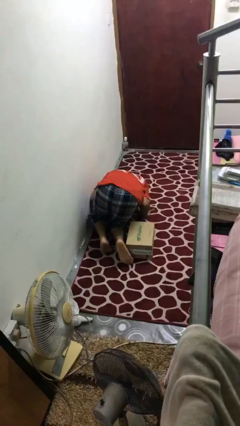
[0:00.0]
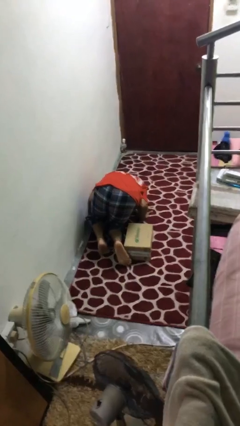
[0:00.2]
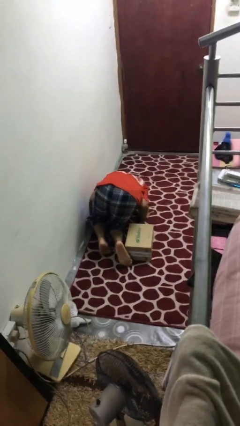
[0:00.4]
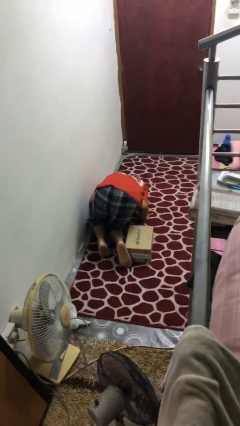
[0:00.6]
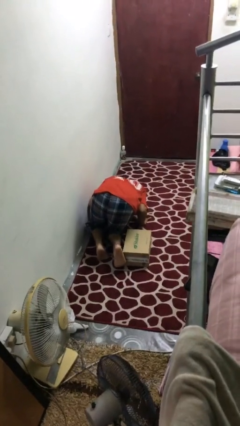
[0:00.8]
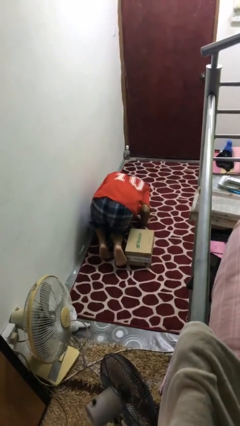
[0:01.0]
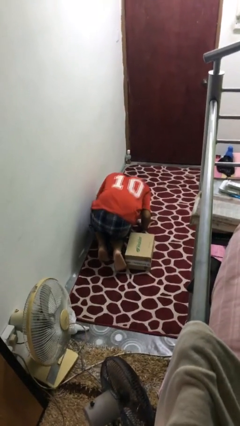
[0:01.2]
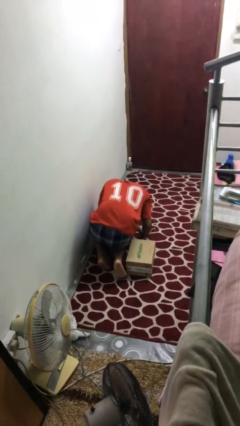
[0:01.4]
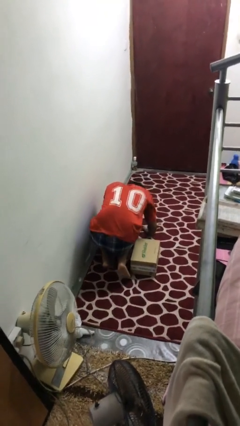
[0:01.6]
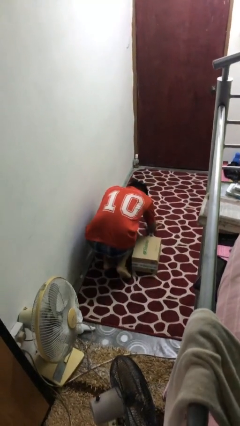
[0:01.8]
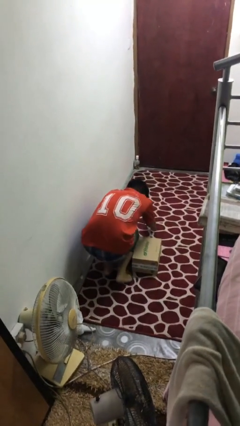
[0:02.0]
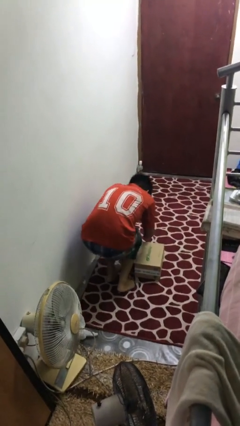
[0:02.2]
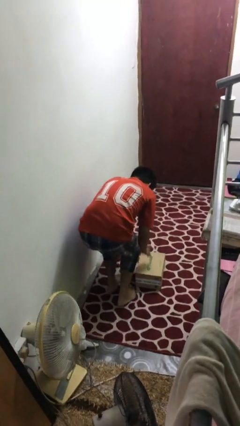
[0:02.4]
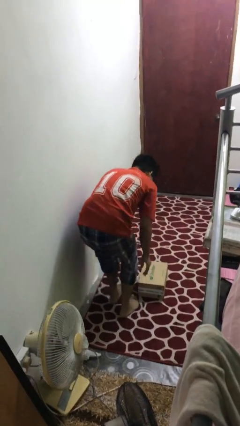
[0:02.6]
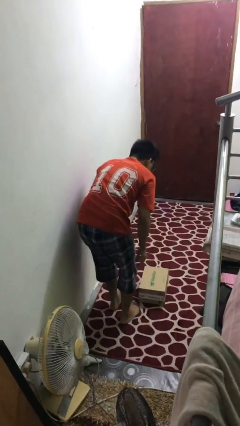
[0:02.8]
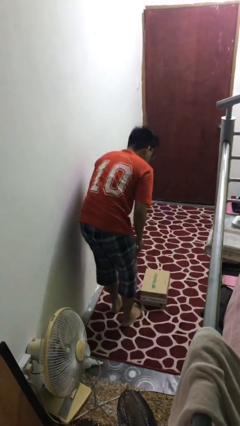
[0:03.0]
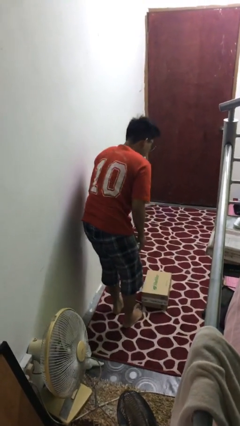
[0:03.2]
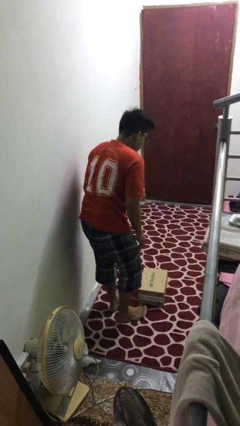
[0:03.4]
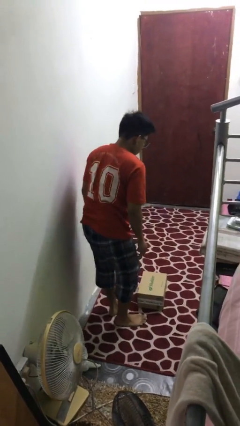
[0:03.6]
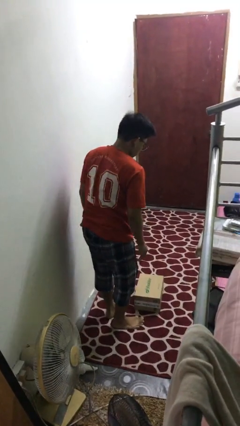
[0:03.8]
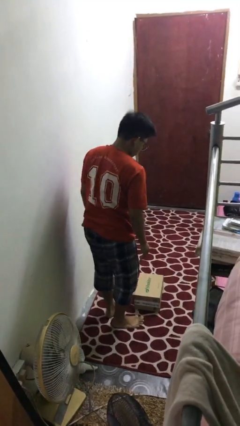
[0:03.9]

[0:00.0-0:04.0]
person stands up from floor

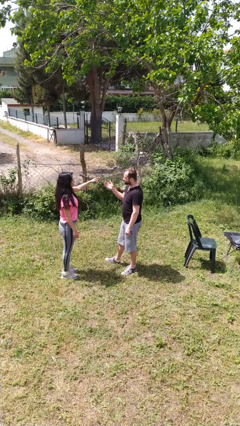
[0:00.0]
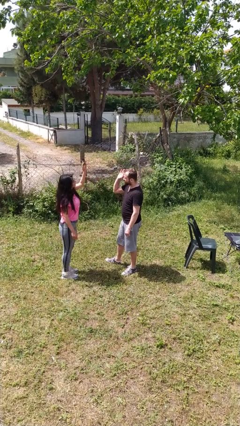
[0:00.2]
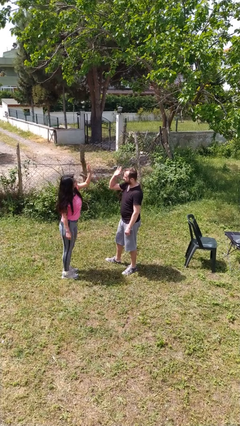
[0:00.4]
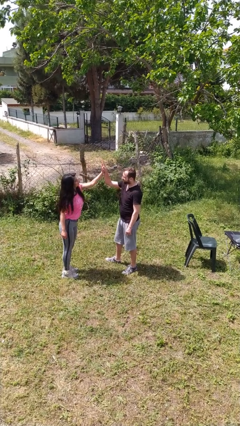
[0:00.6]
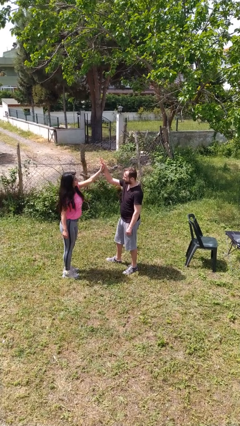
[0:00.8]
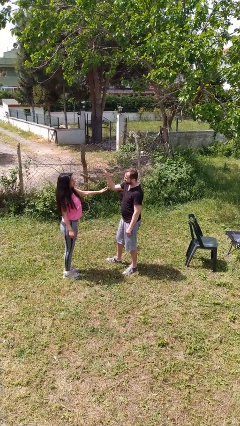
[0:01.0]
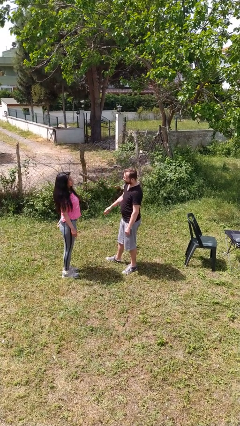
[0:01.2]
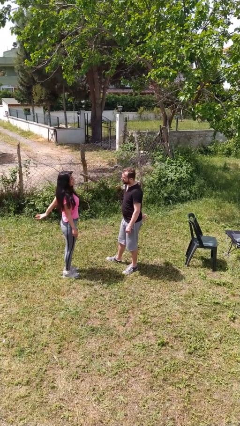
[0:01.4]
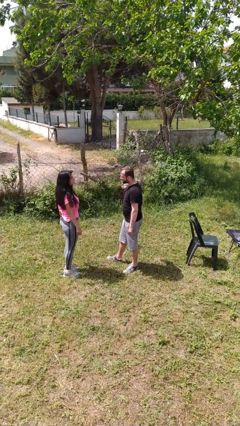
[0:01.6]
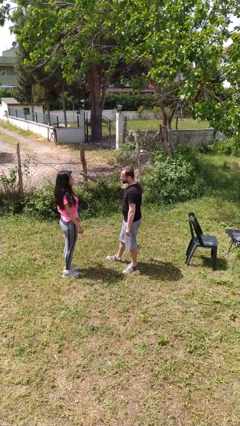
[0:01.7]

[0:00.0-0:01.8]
person highfives hand

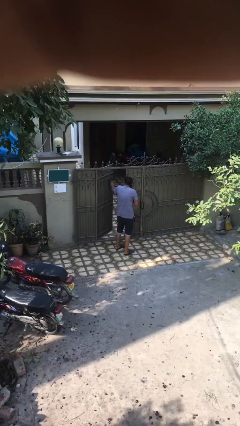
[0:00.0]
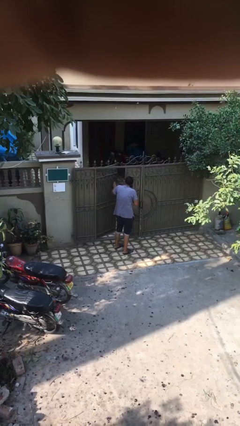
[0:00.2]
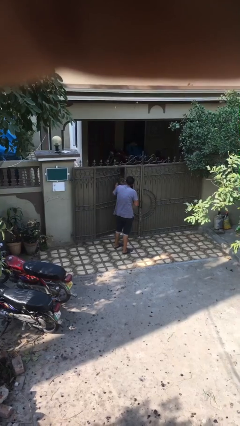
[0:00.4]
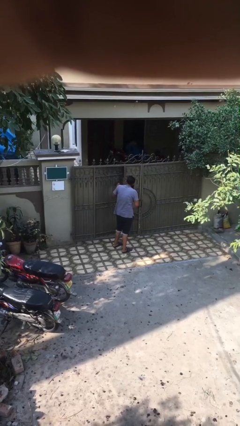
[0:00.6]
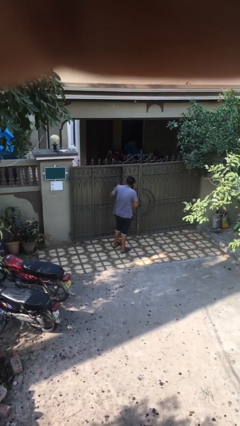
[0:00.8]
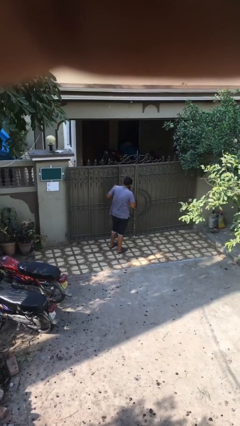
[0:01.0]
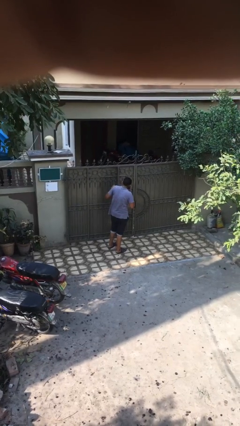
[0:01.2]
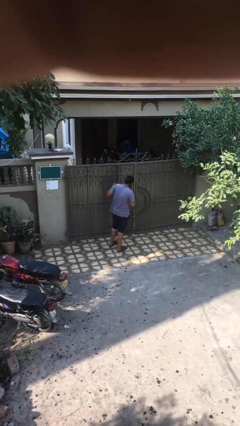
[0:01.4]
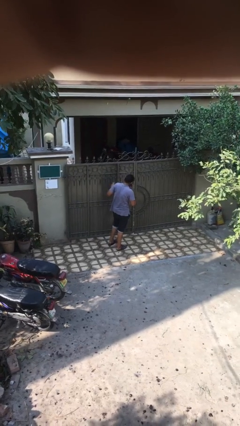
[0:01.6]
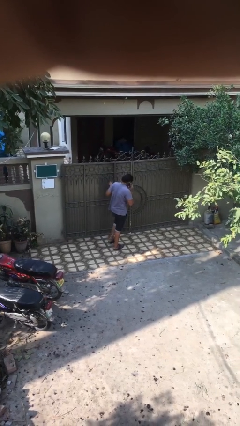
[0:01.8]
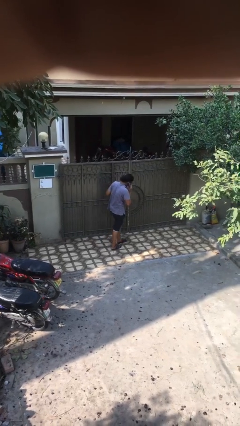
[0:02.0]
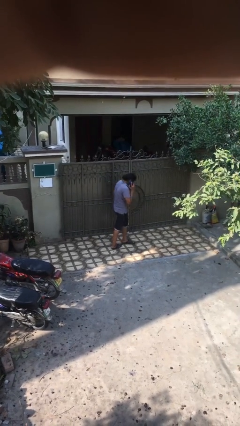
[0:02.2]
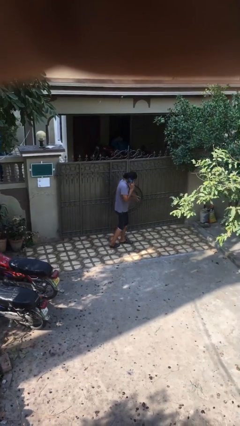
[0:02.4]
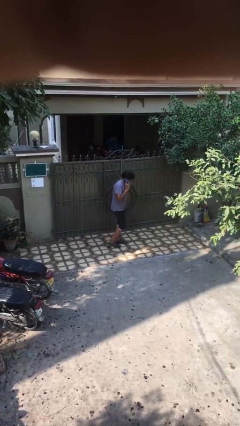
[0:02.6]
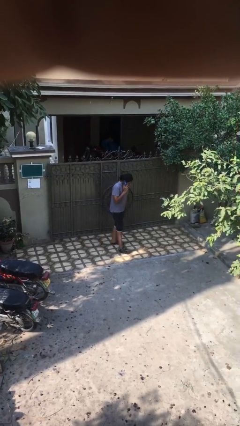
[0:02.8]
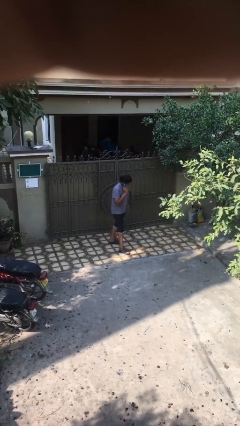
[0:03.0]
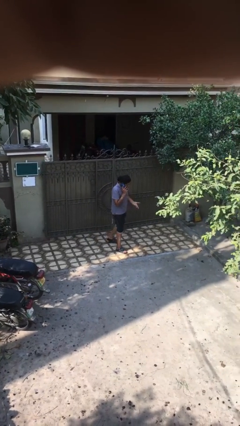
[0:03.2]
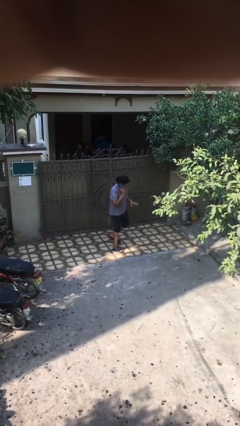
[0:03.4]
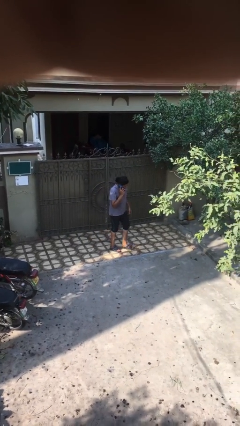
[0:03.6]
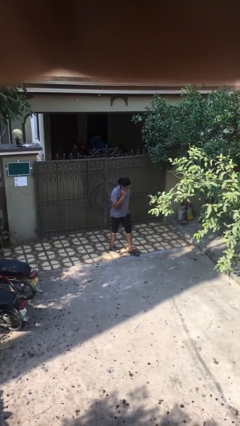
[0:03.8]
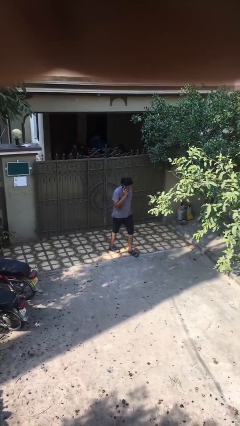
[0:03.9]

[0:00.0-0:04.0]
person closes facility door

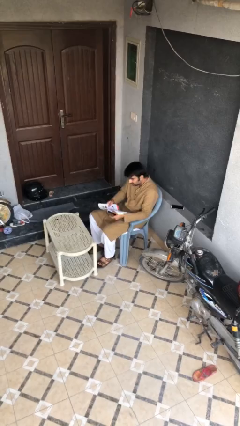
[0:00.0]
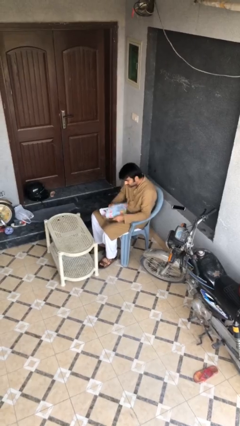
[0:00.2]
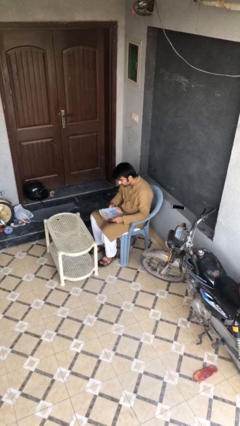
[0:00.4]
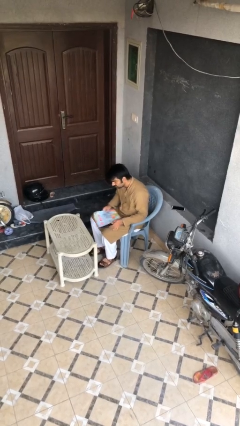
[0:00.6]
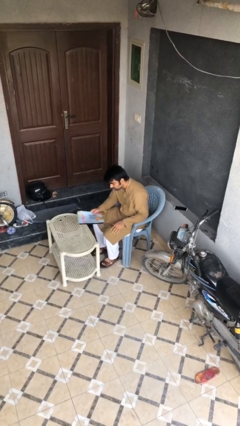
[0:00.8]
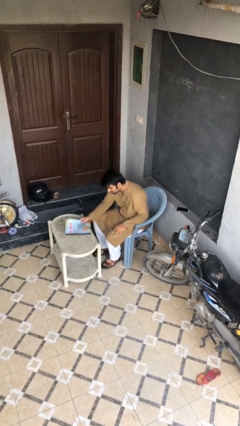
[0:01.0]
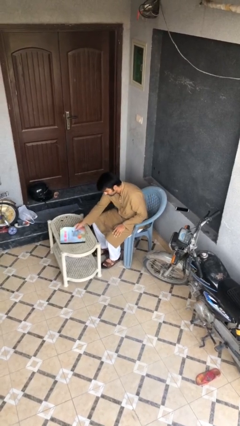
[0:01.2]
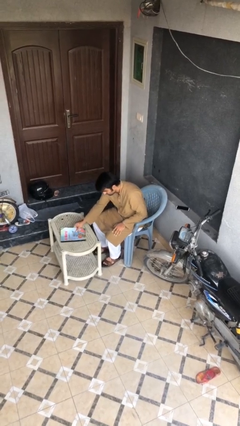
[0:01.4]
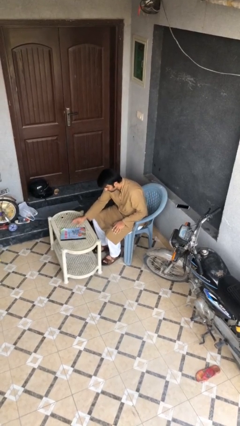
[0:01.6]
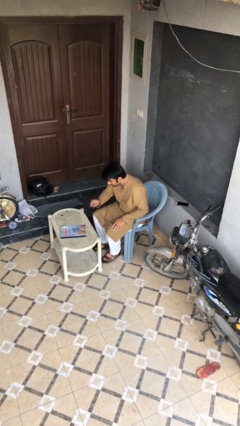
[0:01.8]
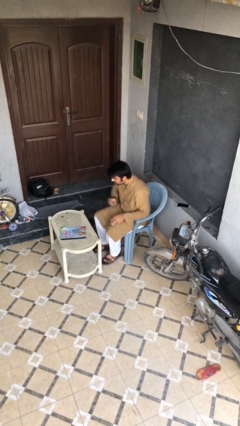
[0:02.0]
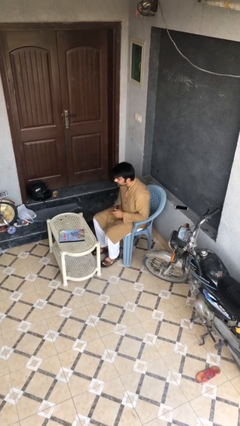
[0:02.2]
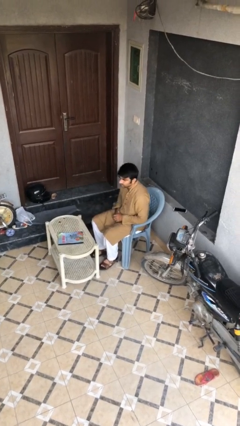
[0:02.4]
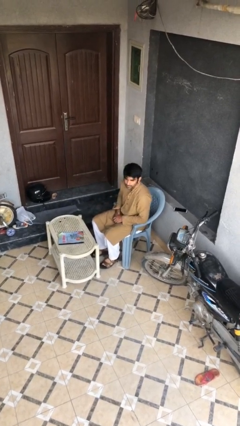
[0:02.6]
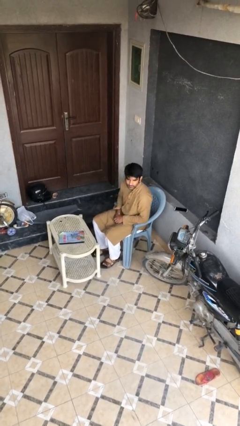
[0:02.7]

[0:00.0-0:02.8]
person puts down object on table

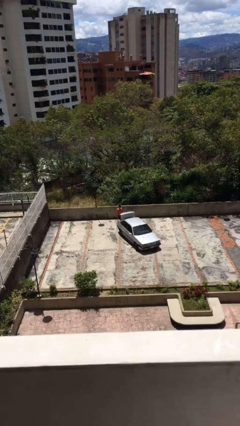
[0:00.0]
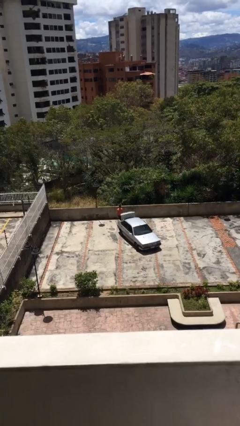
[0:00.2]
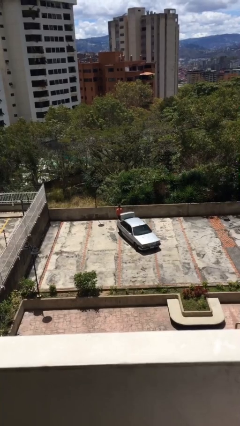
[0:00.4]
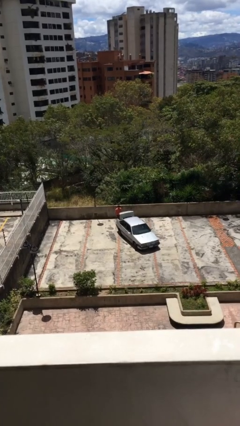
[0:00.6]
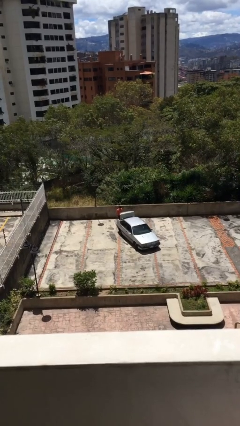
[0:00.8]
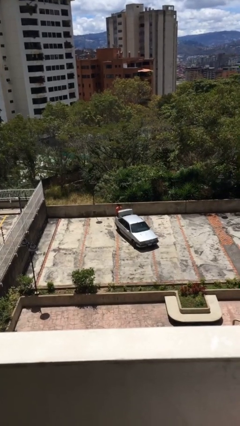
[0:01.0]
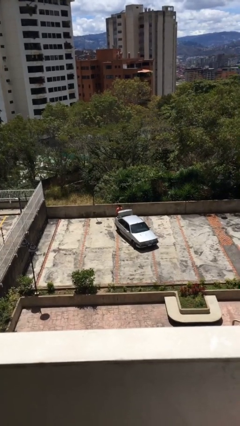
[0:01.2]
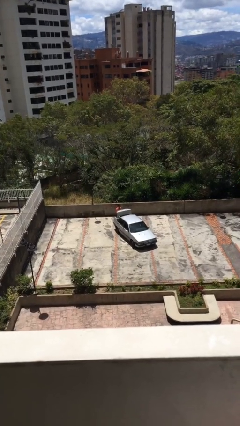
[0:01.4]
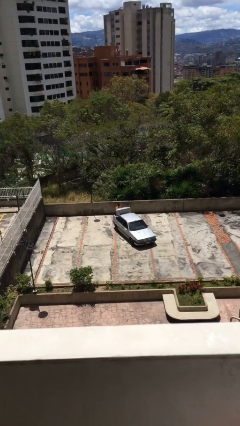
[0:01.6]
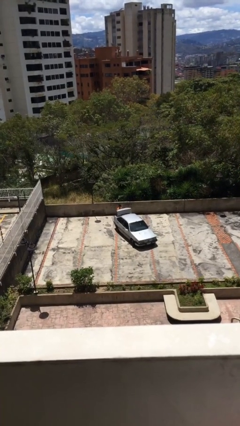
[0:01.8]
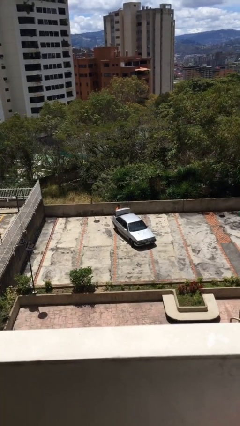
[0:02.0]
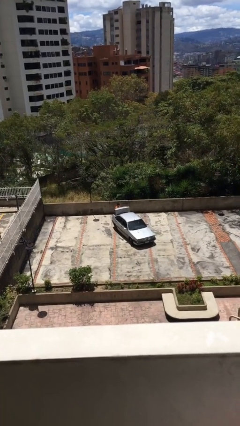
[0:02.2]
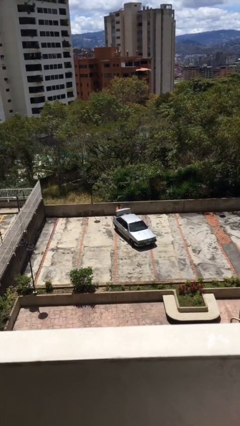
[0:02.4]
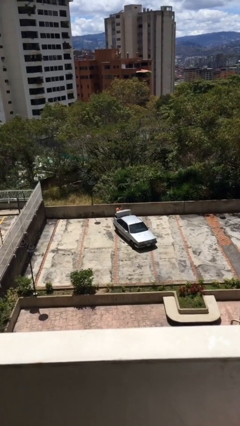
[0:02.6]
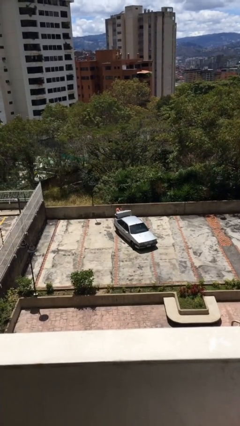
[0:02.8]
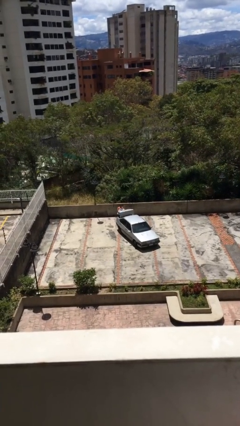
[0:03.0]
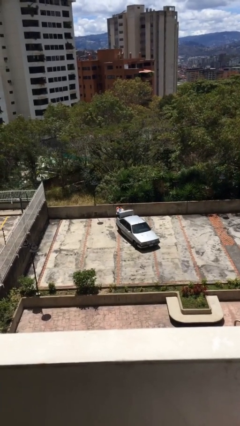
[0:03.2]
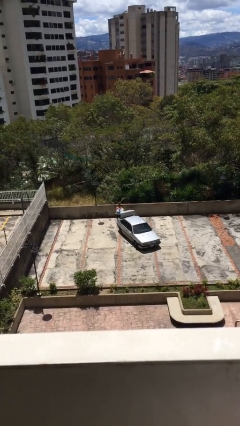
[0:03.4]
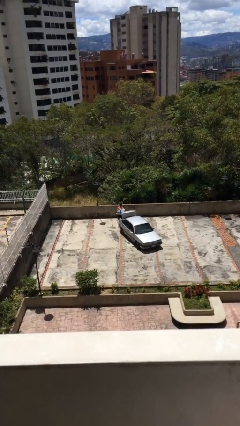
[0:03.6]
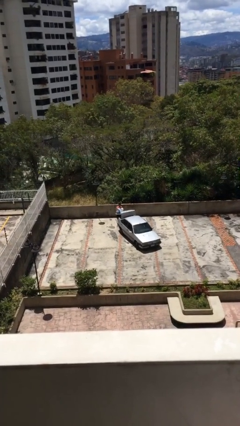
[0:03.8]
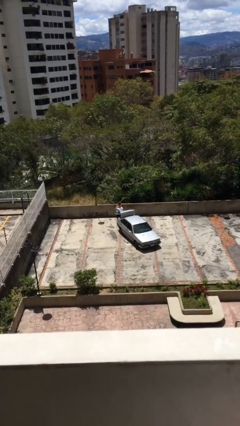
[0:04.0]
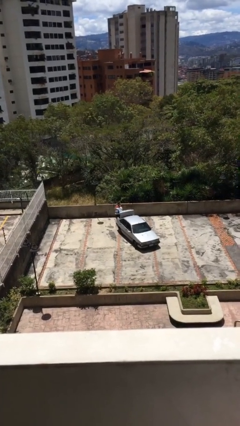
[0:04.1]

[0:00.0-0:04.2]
person unloads car

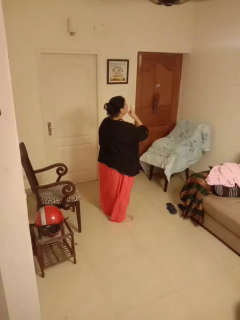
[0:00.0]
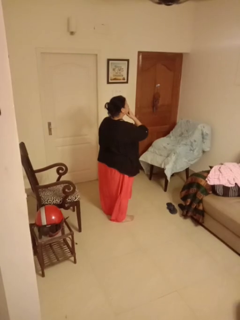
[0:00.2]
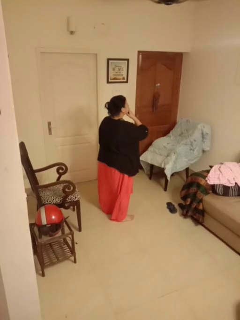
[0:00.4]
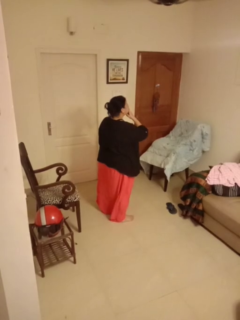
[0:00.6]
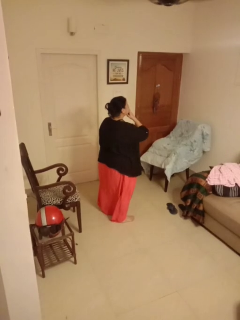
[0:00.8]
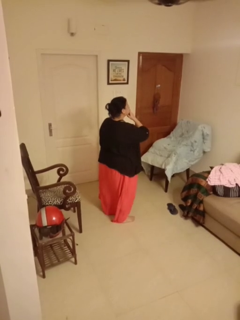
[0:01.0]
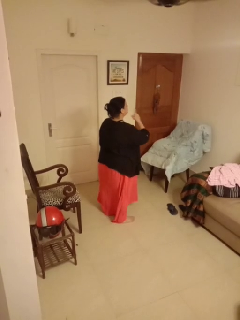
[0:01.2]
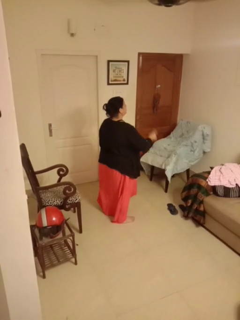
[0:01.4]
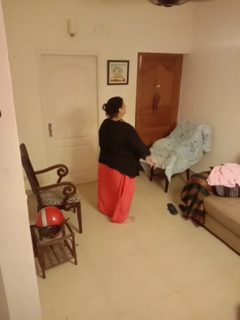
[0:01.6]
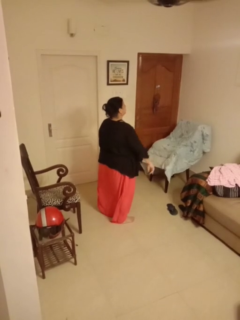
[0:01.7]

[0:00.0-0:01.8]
person gestures be quiet
